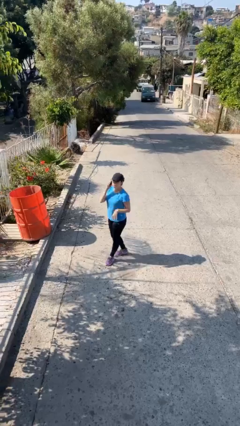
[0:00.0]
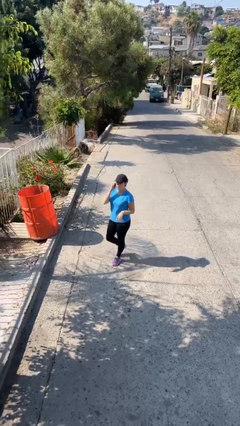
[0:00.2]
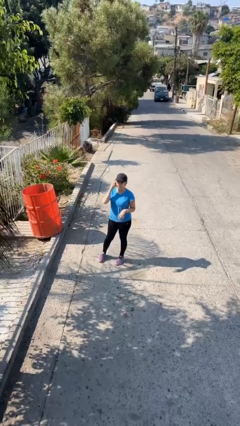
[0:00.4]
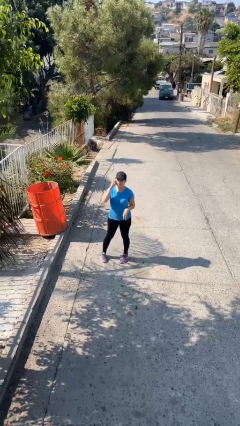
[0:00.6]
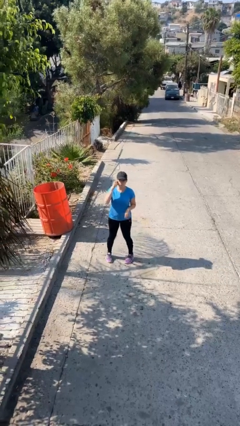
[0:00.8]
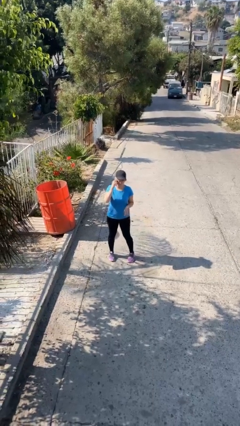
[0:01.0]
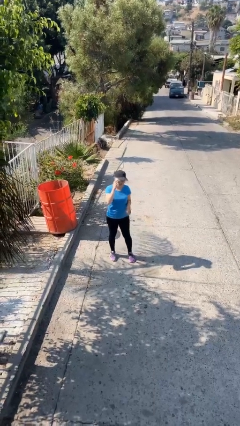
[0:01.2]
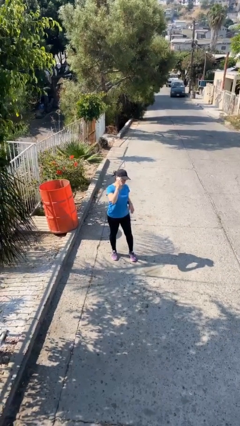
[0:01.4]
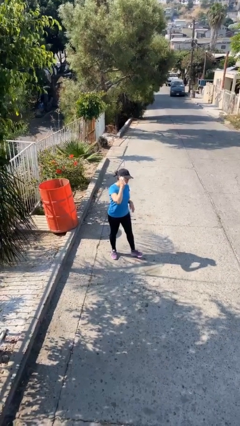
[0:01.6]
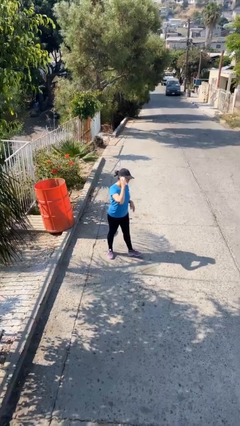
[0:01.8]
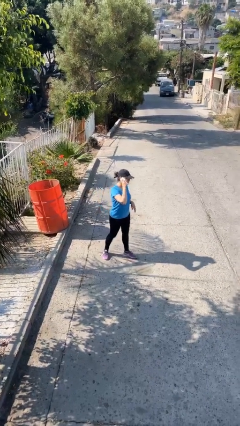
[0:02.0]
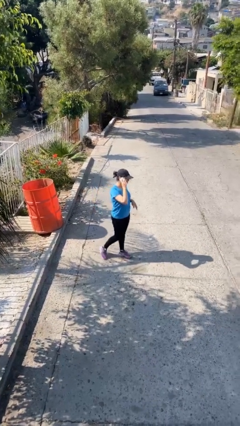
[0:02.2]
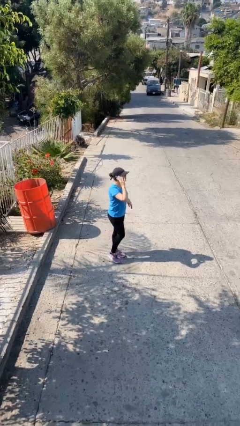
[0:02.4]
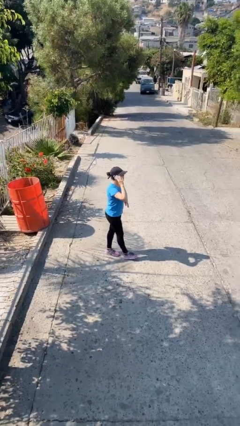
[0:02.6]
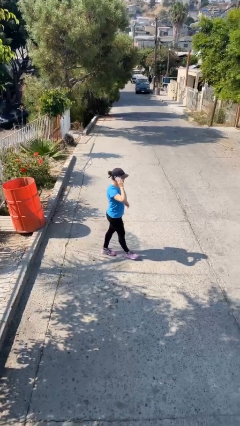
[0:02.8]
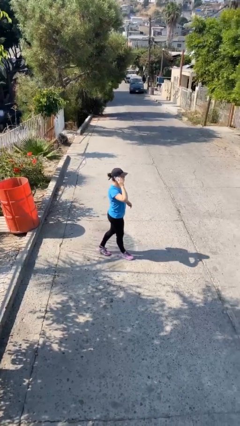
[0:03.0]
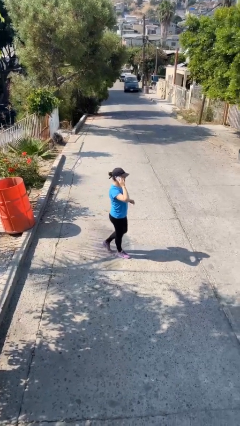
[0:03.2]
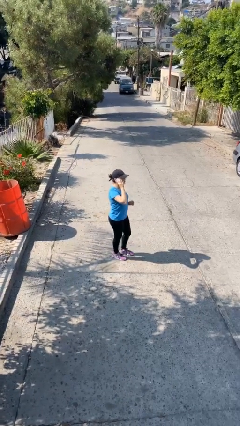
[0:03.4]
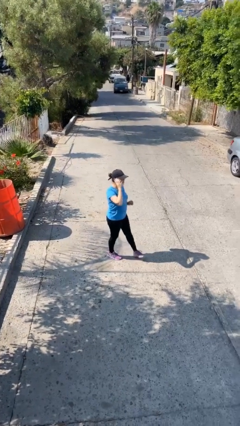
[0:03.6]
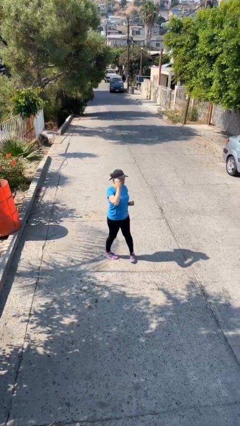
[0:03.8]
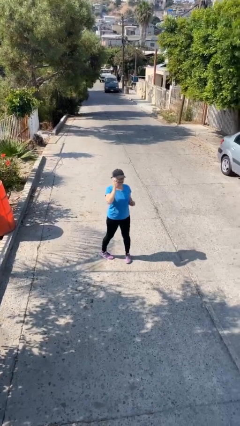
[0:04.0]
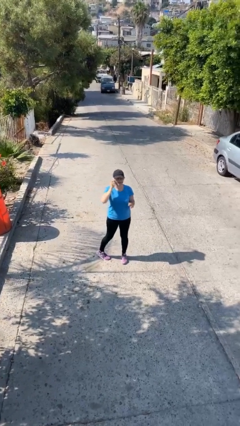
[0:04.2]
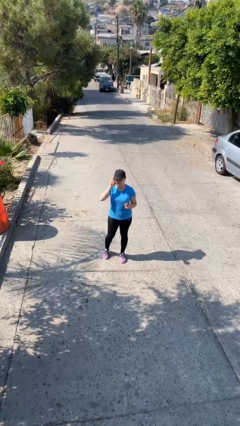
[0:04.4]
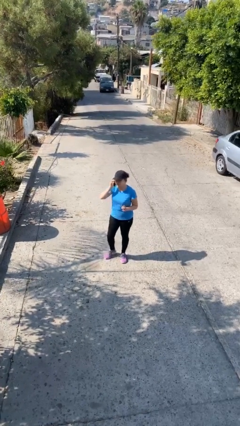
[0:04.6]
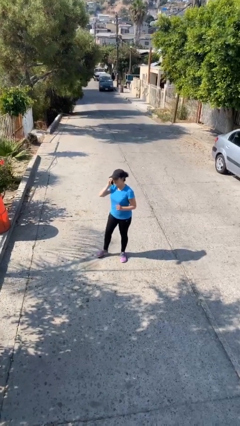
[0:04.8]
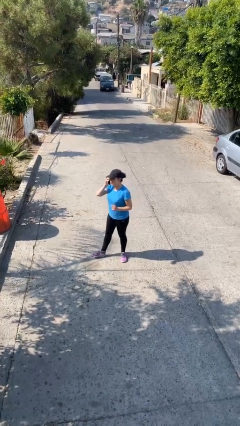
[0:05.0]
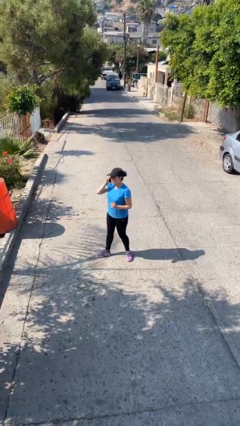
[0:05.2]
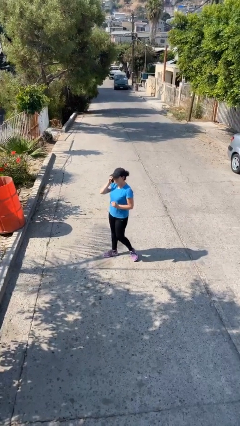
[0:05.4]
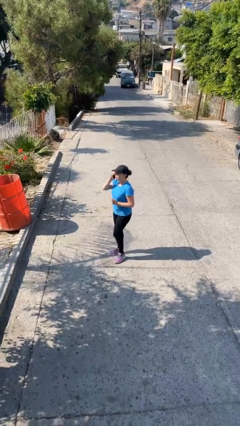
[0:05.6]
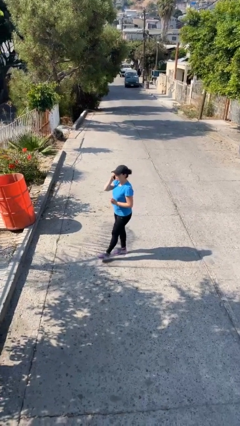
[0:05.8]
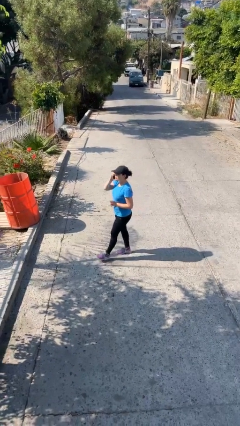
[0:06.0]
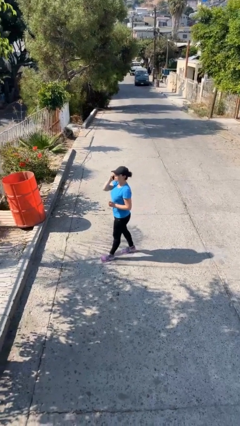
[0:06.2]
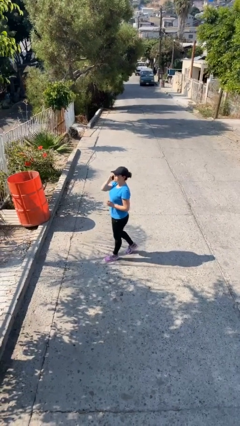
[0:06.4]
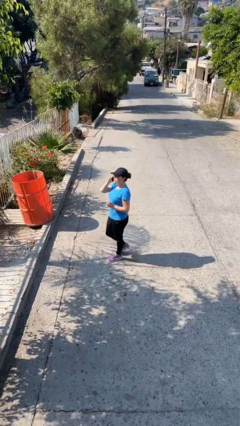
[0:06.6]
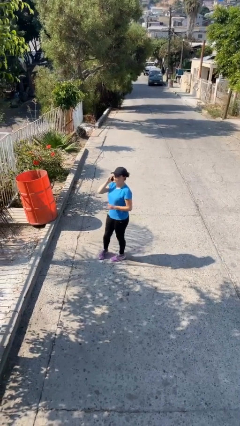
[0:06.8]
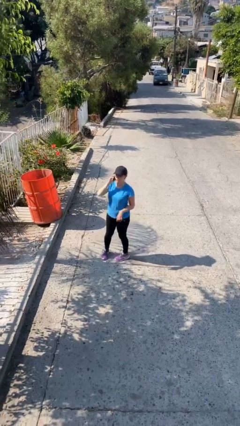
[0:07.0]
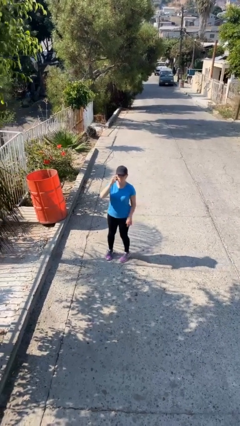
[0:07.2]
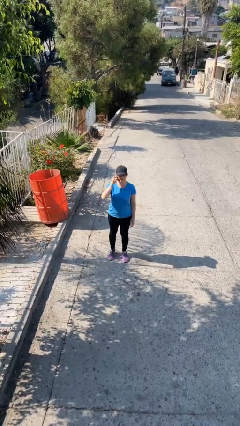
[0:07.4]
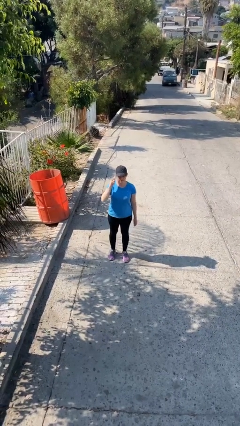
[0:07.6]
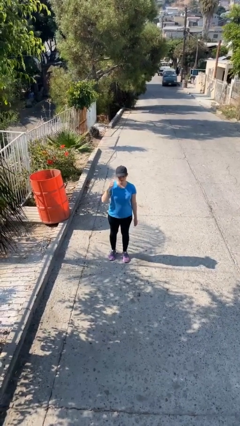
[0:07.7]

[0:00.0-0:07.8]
person talks on phone

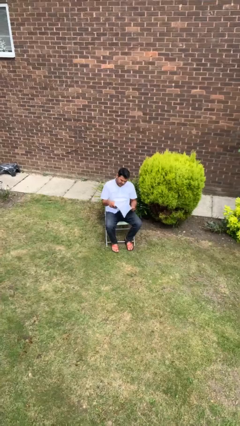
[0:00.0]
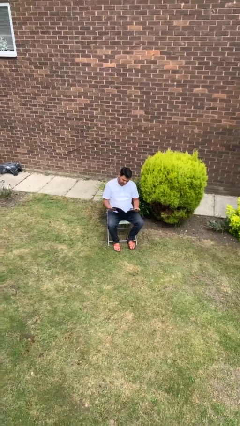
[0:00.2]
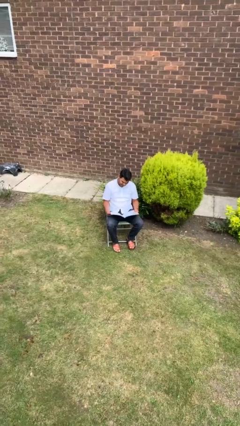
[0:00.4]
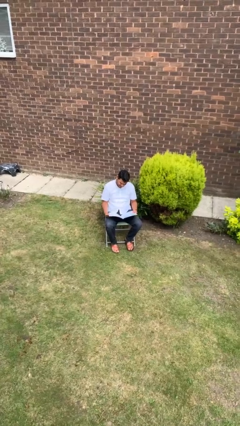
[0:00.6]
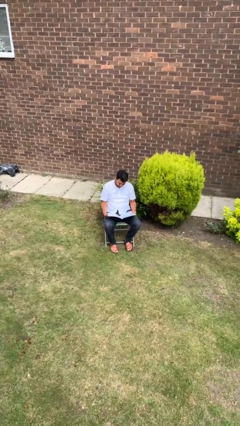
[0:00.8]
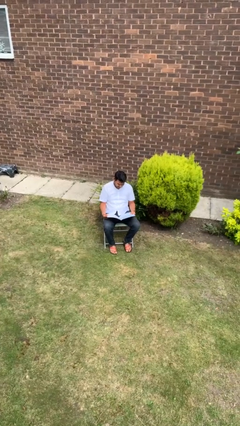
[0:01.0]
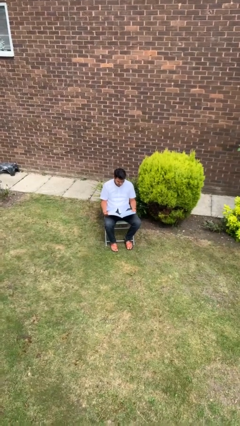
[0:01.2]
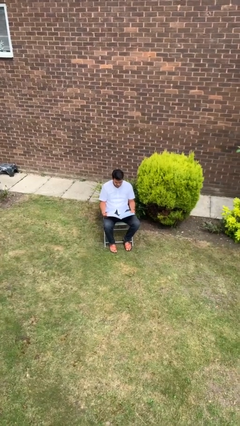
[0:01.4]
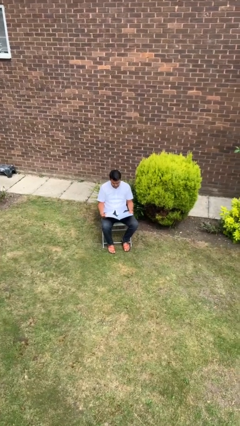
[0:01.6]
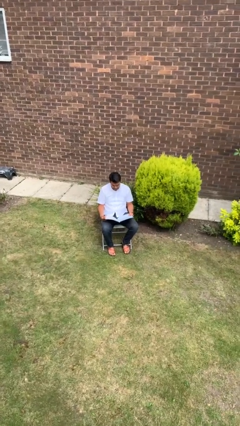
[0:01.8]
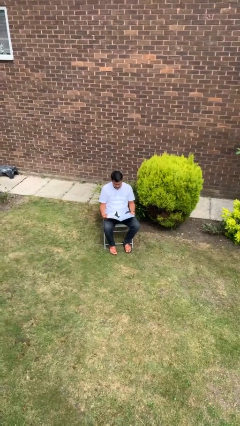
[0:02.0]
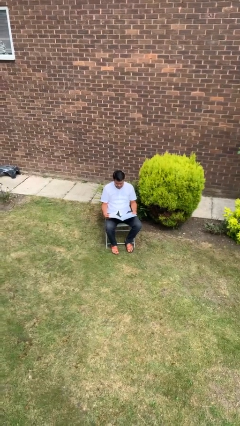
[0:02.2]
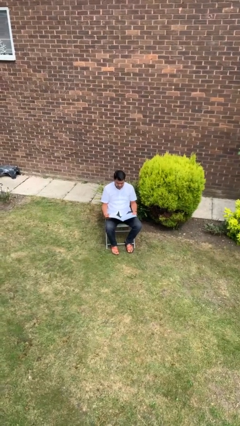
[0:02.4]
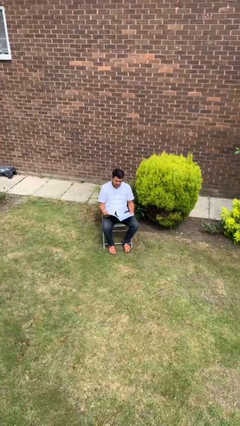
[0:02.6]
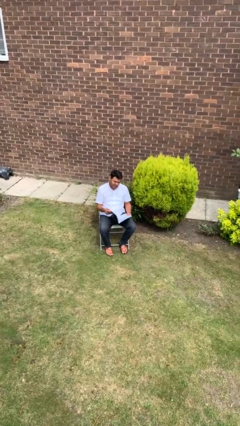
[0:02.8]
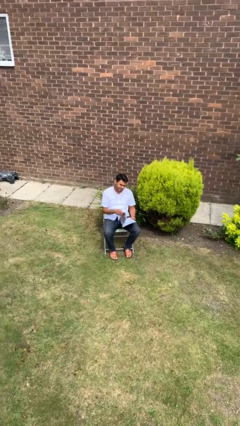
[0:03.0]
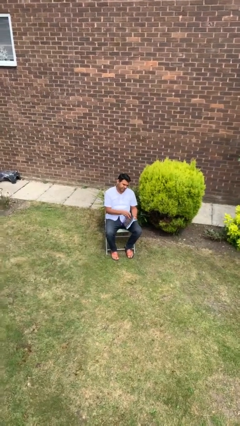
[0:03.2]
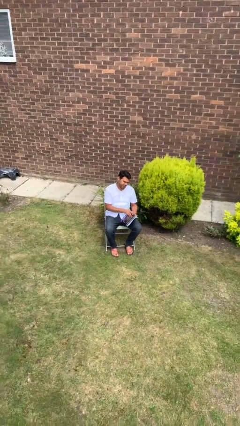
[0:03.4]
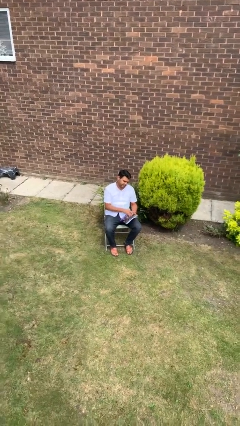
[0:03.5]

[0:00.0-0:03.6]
person reads magazine

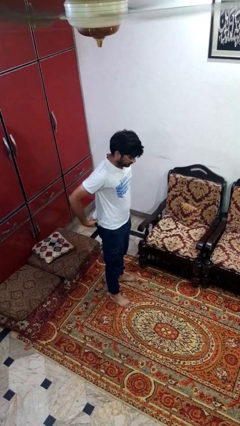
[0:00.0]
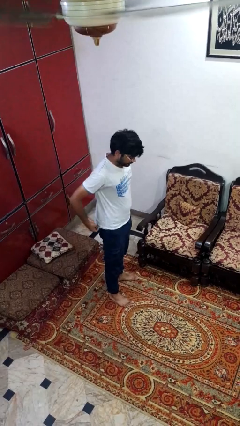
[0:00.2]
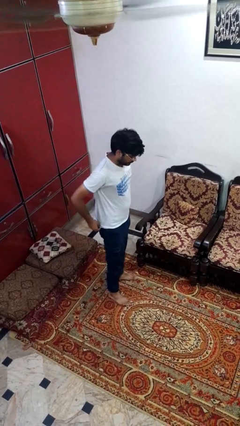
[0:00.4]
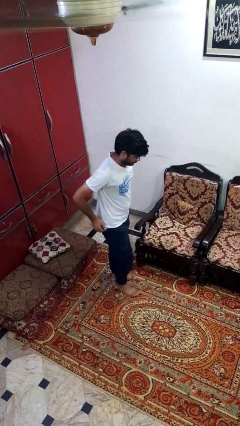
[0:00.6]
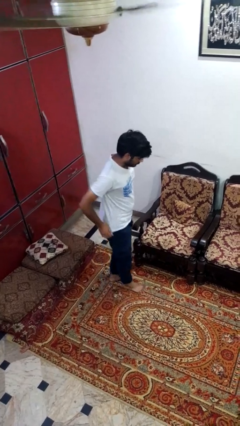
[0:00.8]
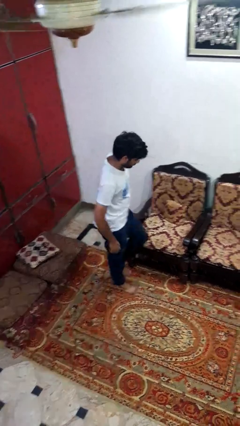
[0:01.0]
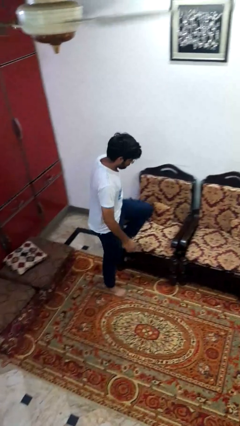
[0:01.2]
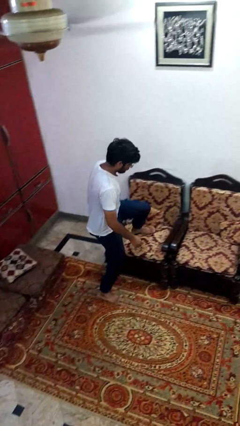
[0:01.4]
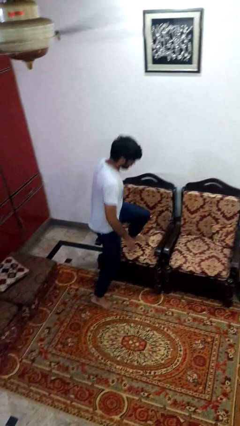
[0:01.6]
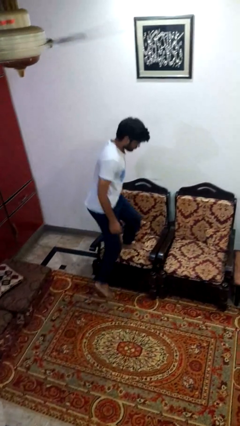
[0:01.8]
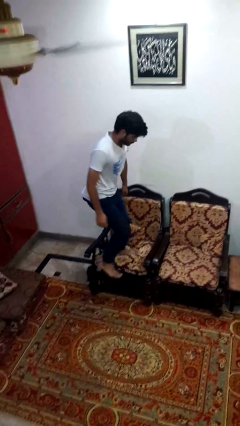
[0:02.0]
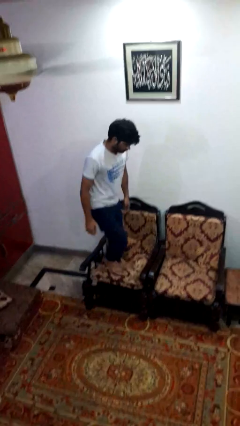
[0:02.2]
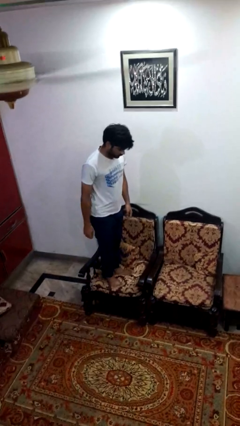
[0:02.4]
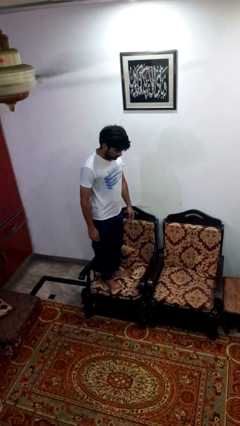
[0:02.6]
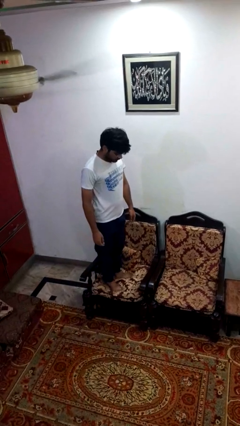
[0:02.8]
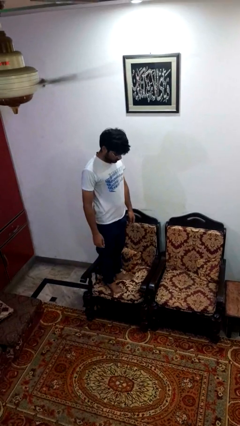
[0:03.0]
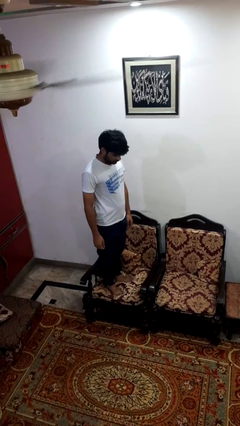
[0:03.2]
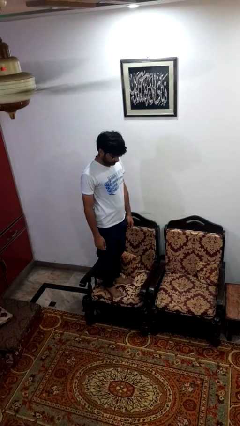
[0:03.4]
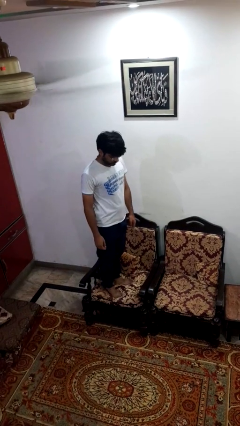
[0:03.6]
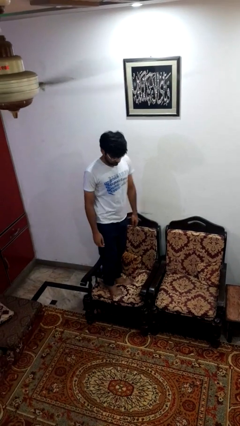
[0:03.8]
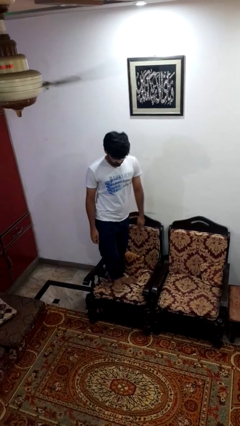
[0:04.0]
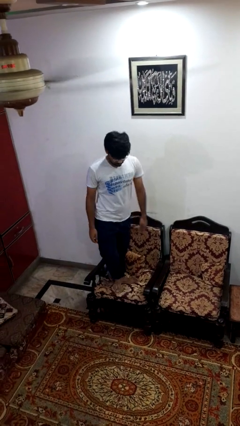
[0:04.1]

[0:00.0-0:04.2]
person climbs on couch

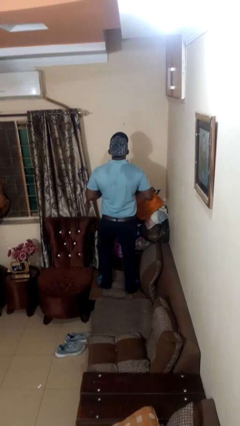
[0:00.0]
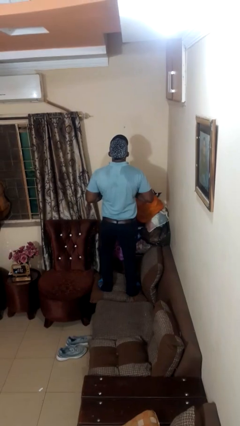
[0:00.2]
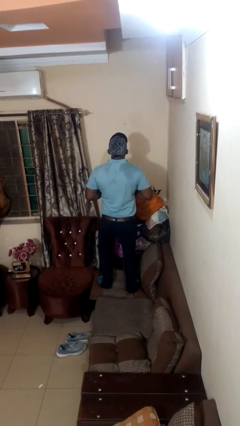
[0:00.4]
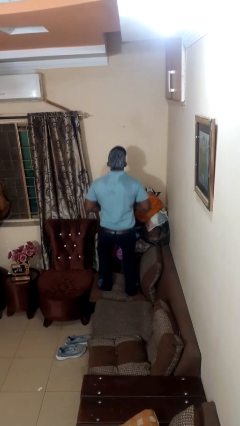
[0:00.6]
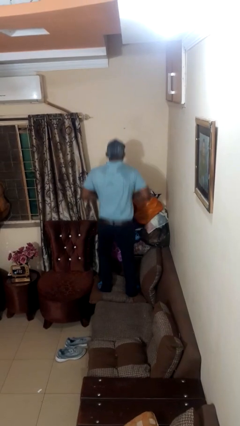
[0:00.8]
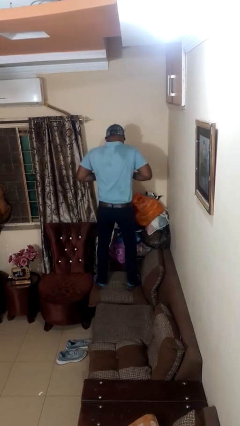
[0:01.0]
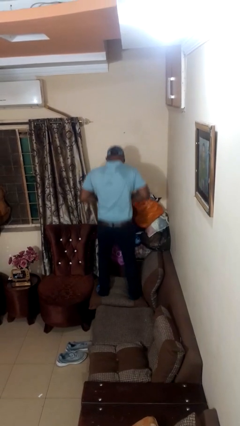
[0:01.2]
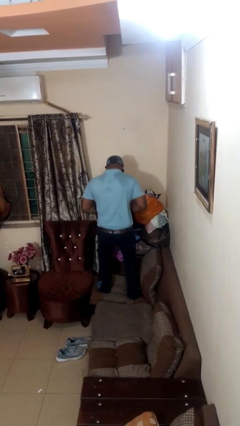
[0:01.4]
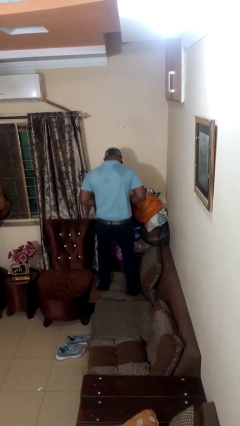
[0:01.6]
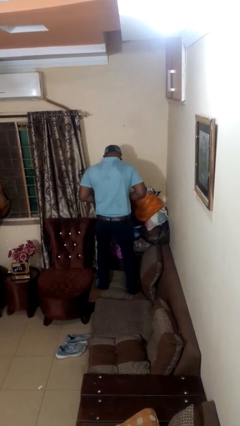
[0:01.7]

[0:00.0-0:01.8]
person jumps on couch

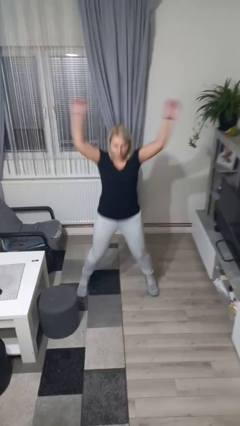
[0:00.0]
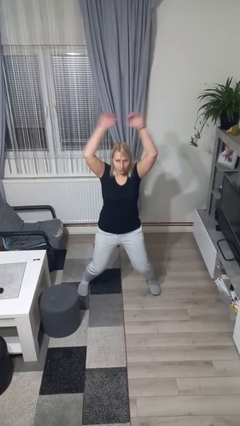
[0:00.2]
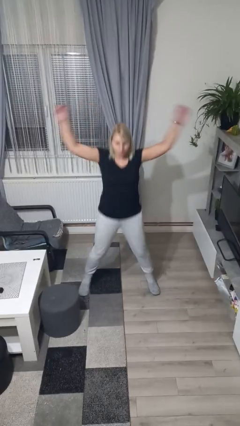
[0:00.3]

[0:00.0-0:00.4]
person exercises with jumping jacks

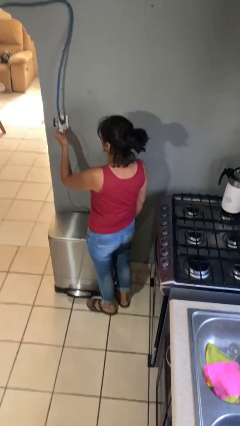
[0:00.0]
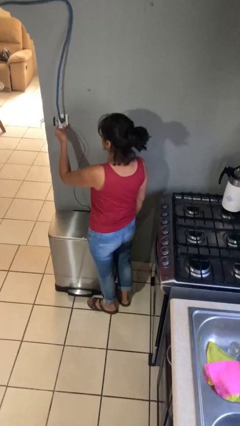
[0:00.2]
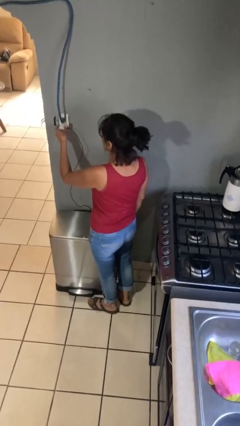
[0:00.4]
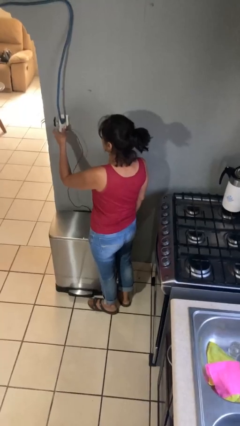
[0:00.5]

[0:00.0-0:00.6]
person plugs into electrical socket
